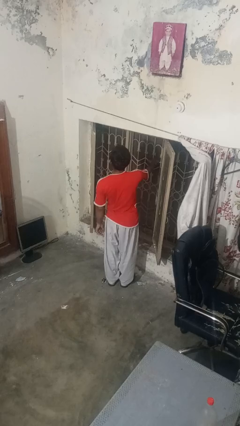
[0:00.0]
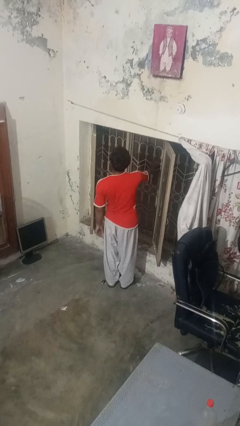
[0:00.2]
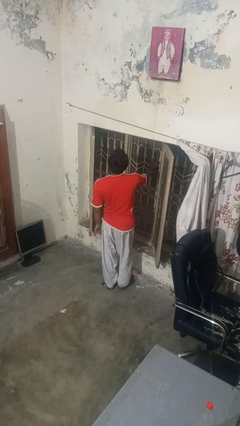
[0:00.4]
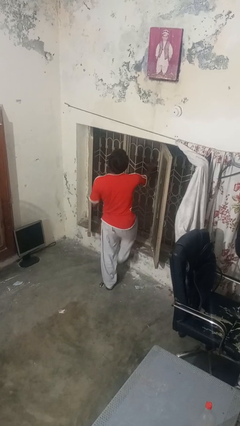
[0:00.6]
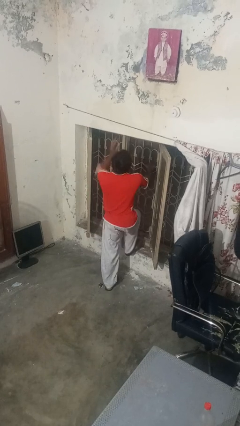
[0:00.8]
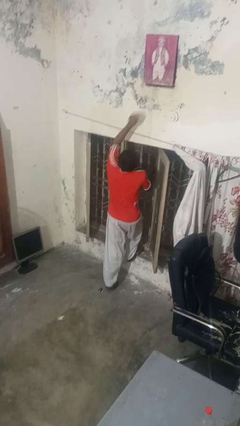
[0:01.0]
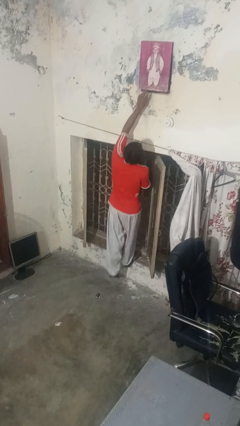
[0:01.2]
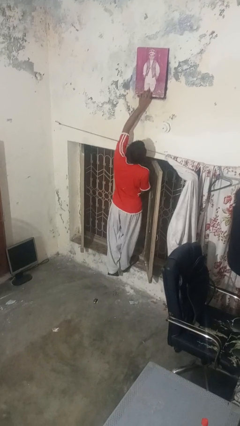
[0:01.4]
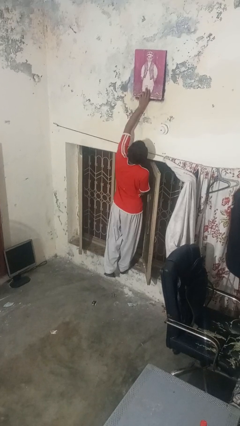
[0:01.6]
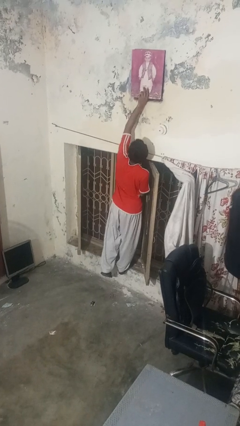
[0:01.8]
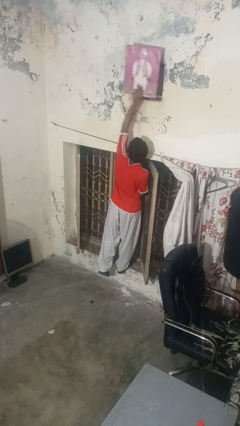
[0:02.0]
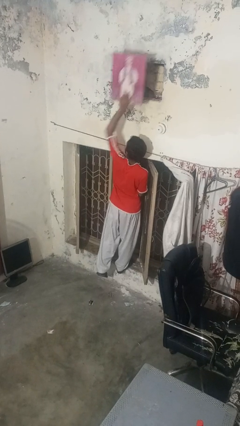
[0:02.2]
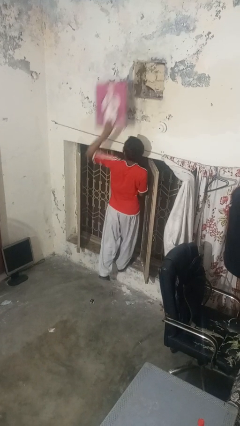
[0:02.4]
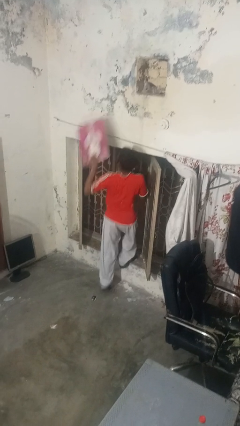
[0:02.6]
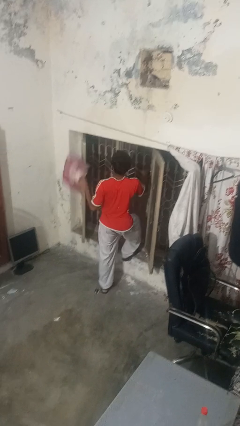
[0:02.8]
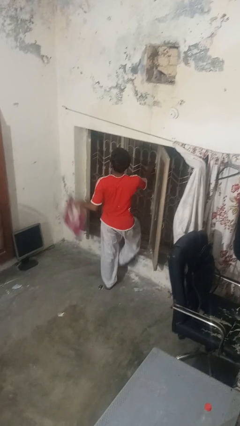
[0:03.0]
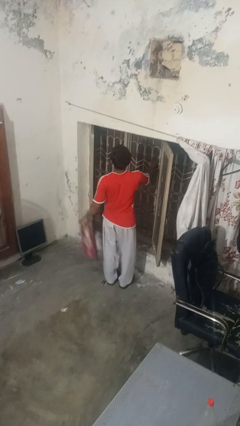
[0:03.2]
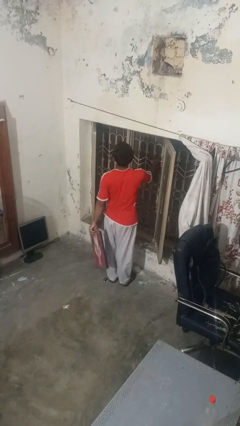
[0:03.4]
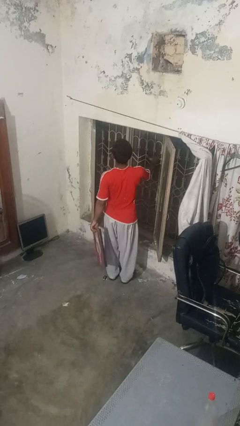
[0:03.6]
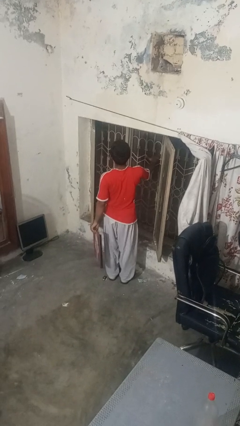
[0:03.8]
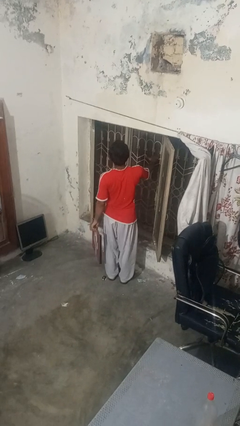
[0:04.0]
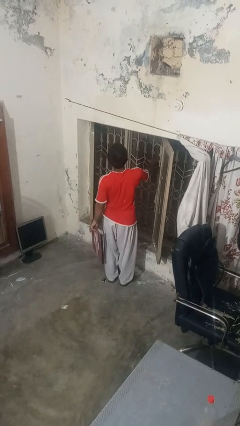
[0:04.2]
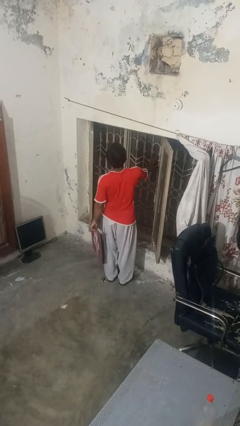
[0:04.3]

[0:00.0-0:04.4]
person takes down picture frame

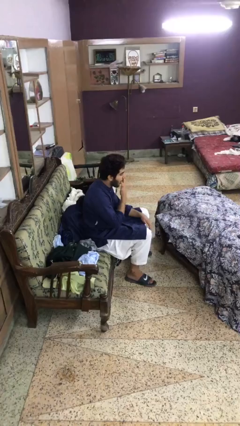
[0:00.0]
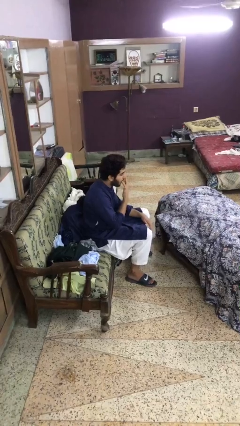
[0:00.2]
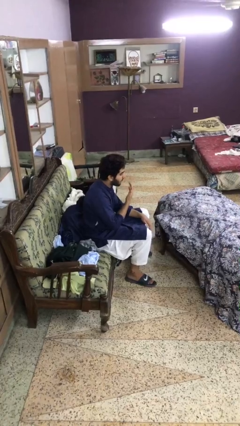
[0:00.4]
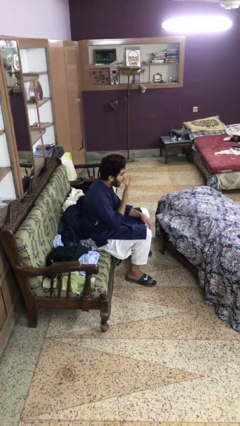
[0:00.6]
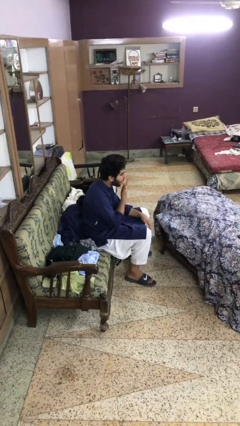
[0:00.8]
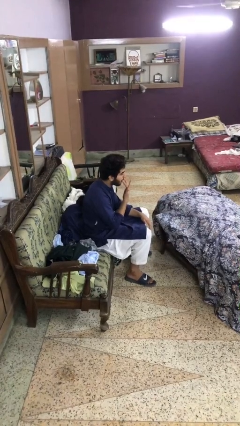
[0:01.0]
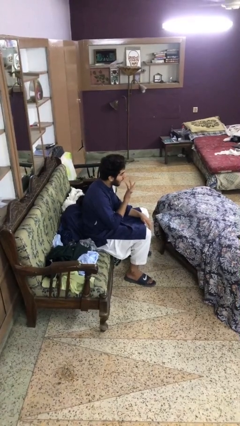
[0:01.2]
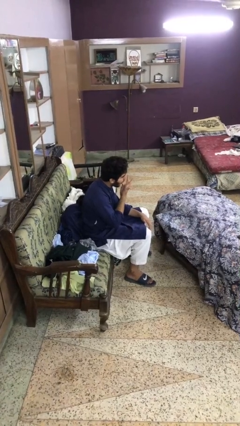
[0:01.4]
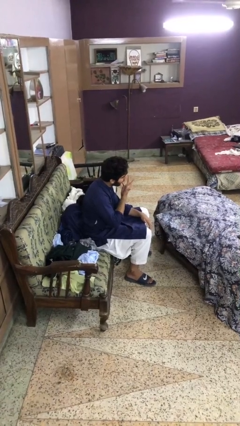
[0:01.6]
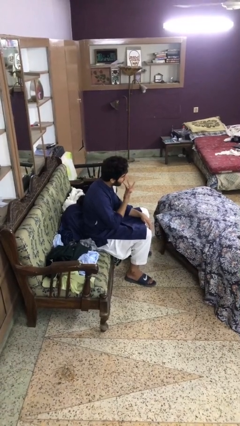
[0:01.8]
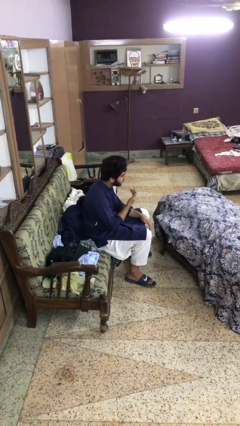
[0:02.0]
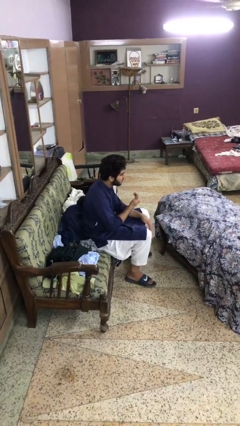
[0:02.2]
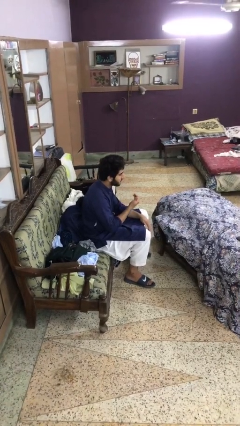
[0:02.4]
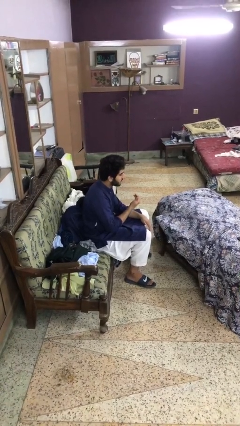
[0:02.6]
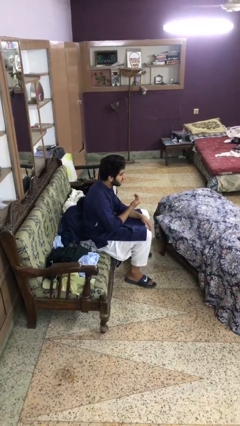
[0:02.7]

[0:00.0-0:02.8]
person licks fingers

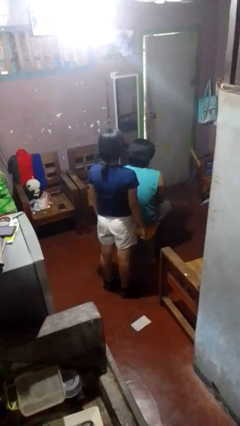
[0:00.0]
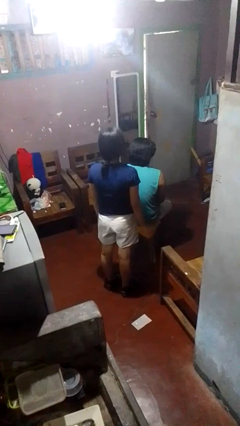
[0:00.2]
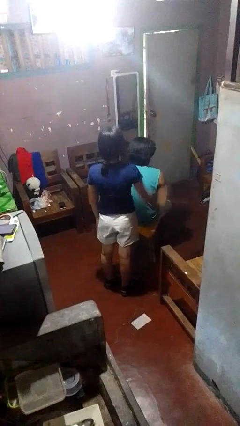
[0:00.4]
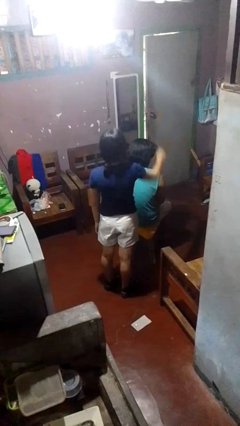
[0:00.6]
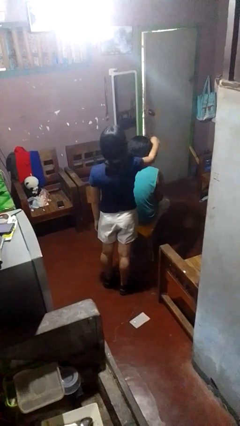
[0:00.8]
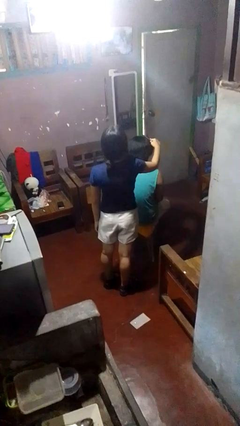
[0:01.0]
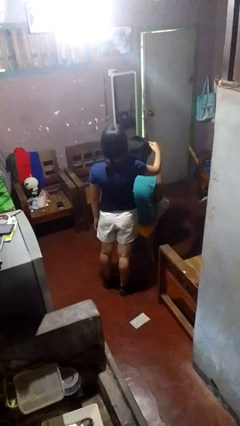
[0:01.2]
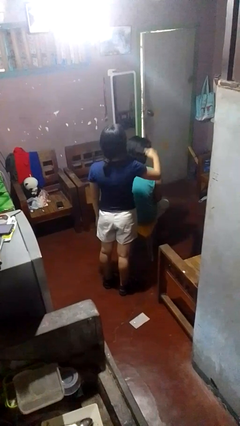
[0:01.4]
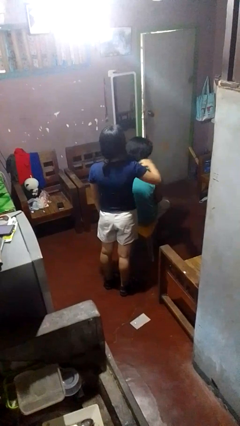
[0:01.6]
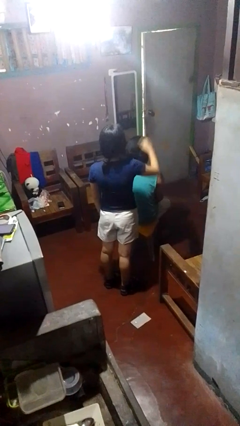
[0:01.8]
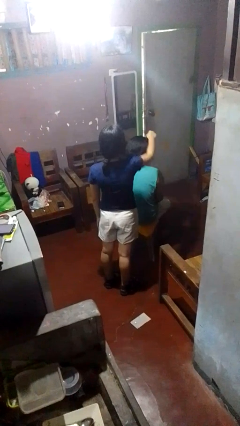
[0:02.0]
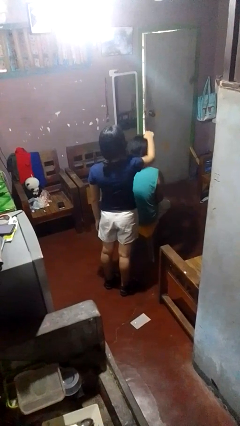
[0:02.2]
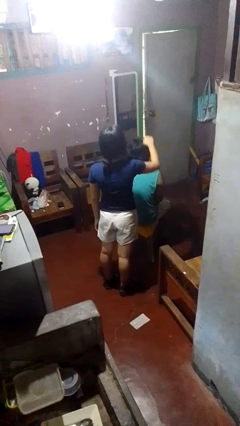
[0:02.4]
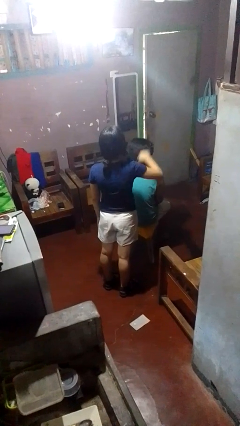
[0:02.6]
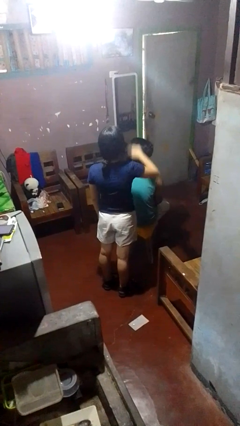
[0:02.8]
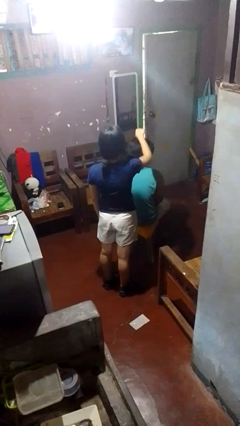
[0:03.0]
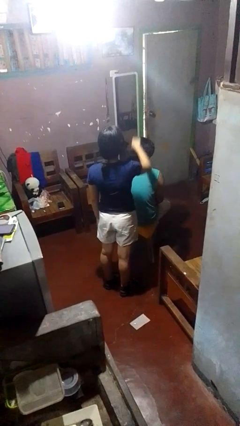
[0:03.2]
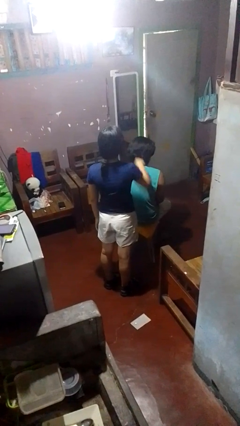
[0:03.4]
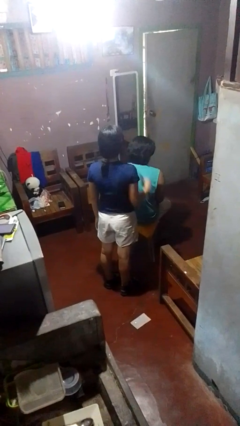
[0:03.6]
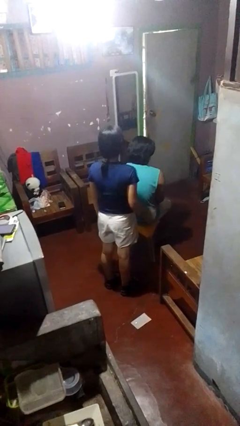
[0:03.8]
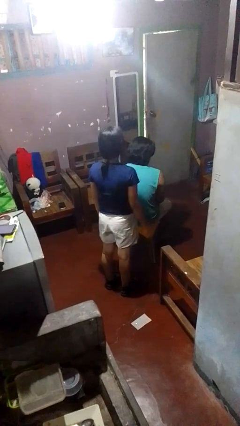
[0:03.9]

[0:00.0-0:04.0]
person brushes hair of person

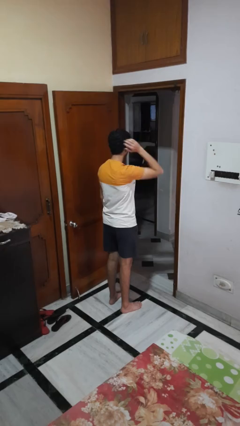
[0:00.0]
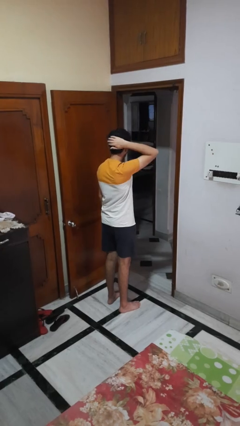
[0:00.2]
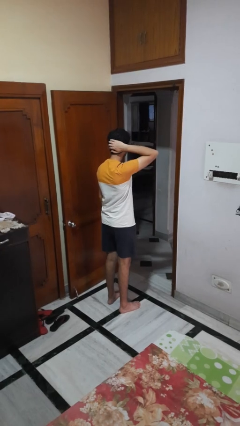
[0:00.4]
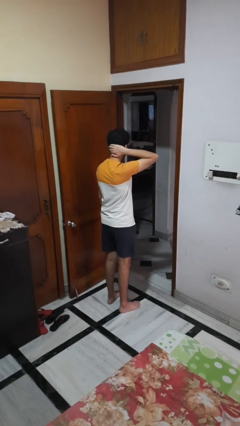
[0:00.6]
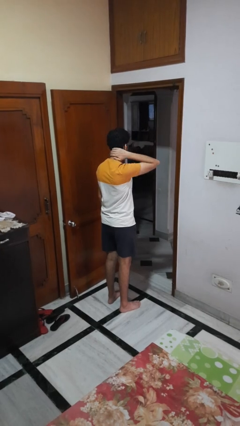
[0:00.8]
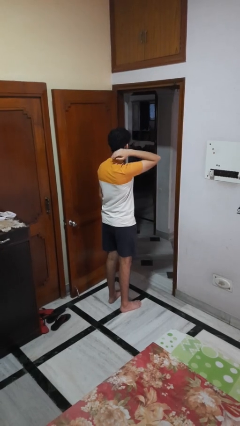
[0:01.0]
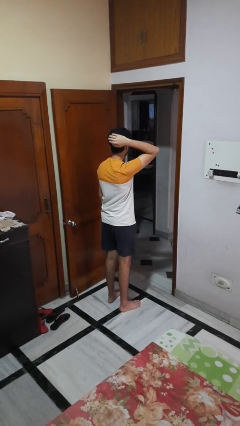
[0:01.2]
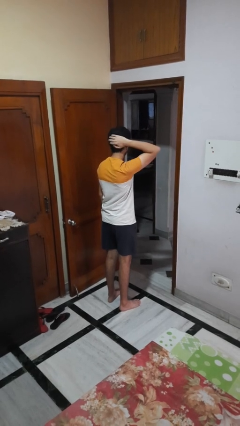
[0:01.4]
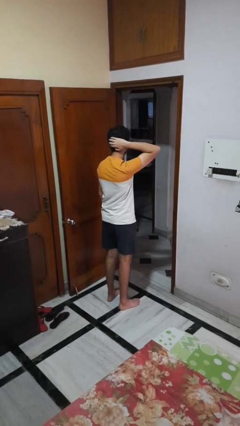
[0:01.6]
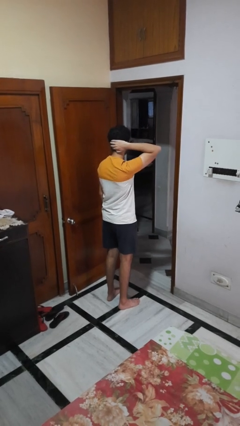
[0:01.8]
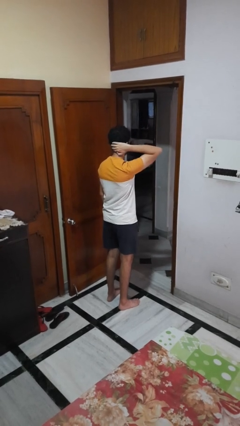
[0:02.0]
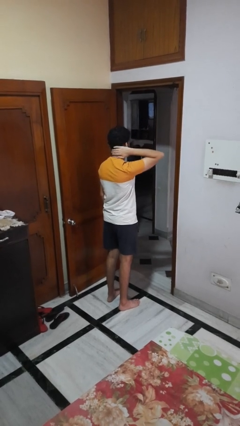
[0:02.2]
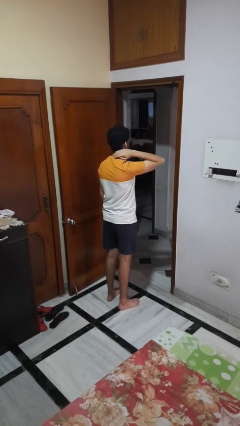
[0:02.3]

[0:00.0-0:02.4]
person strokes hair

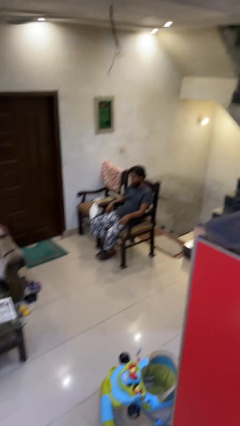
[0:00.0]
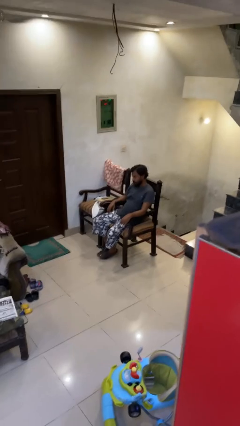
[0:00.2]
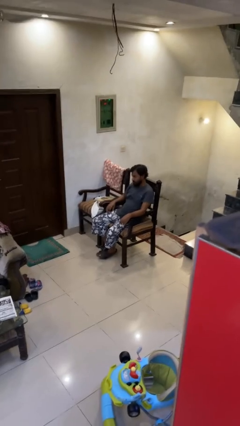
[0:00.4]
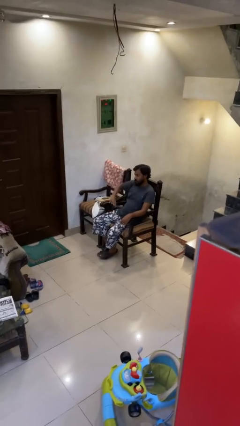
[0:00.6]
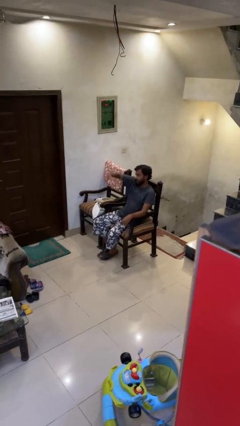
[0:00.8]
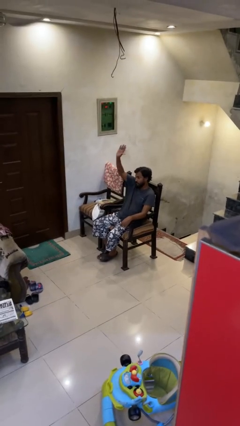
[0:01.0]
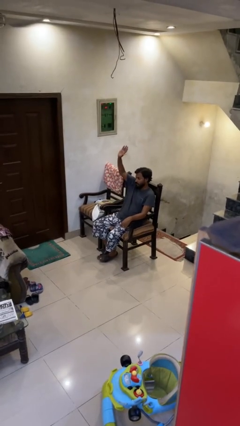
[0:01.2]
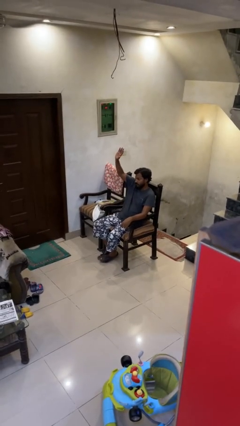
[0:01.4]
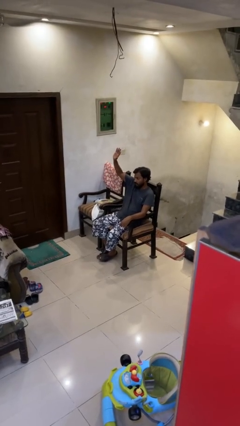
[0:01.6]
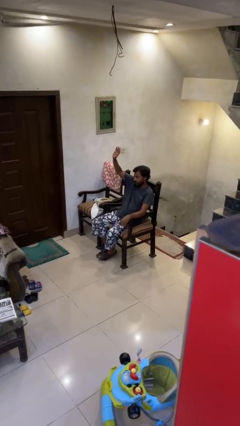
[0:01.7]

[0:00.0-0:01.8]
person gestures swipe up

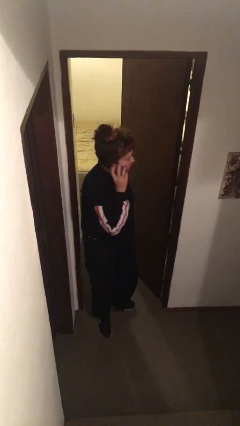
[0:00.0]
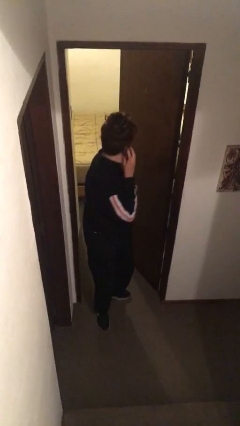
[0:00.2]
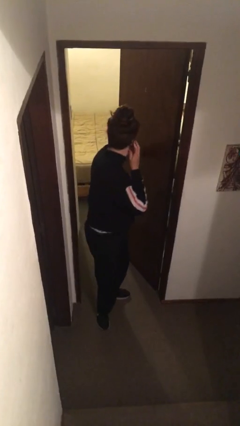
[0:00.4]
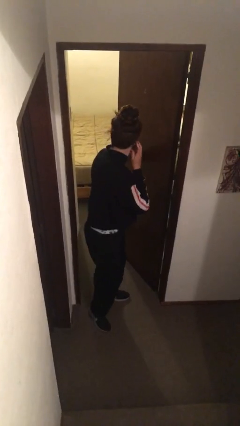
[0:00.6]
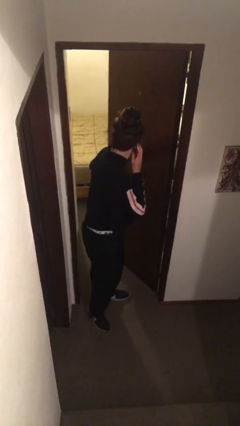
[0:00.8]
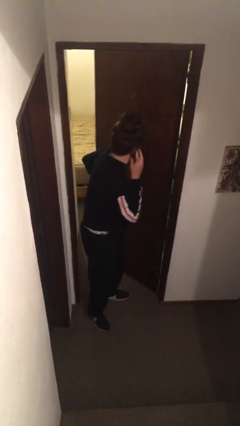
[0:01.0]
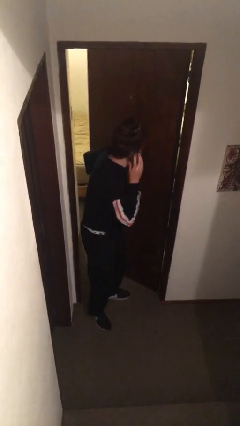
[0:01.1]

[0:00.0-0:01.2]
person closes facility door

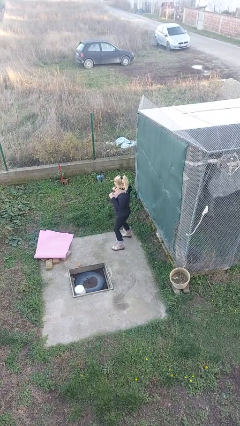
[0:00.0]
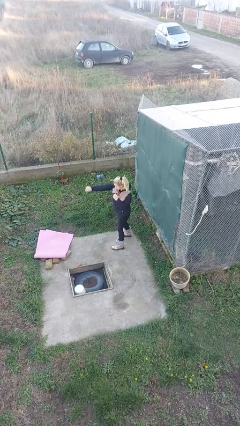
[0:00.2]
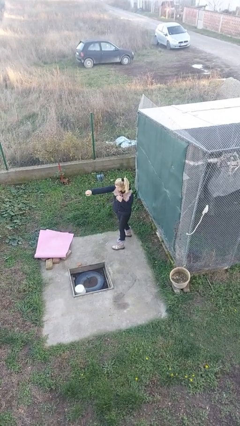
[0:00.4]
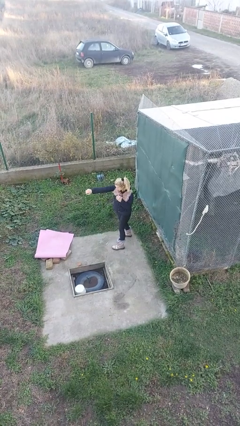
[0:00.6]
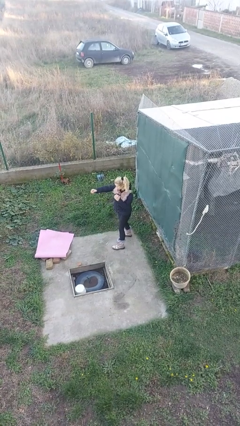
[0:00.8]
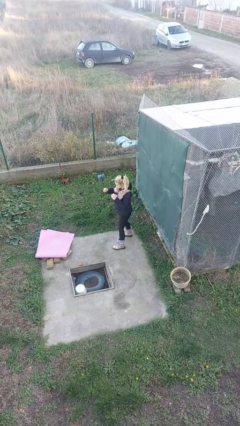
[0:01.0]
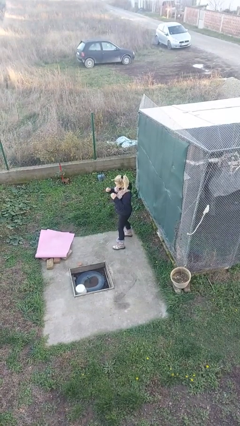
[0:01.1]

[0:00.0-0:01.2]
person punches
